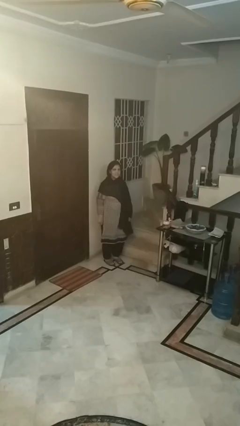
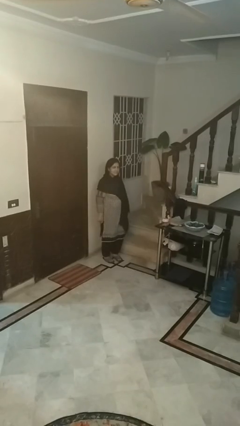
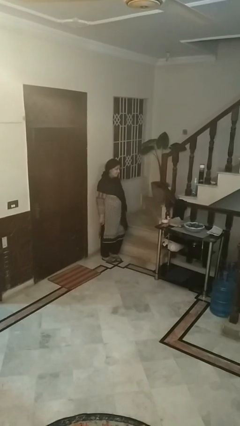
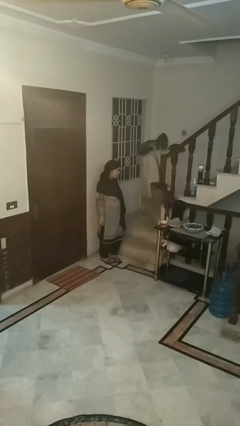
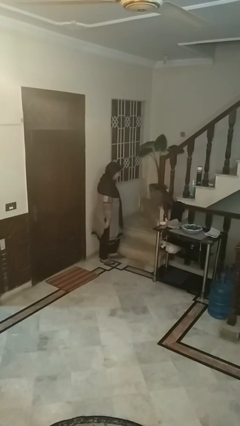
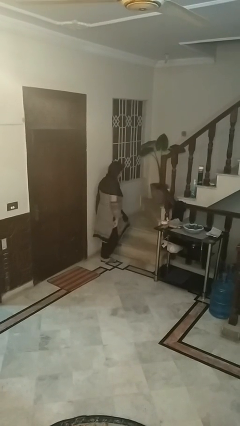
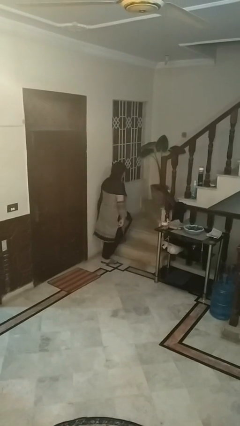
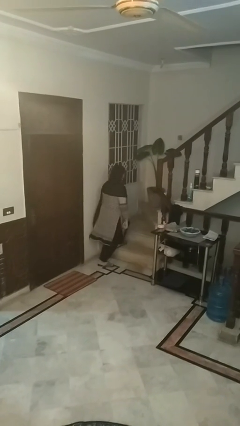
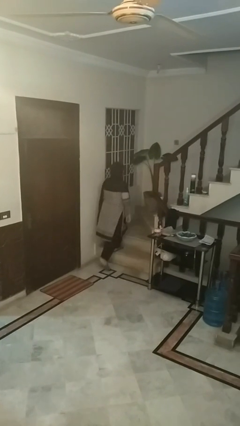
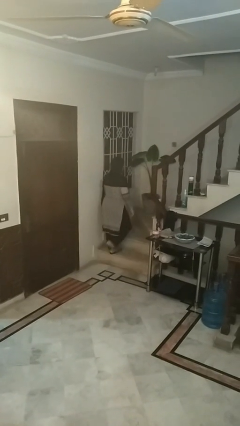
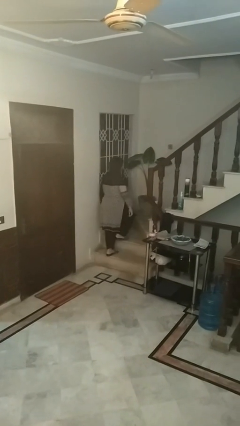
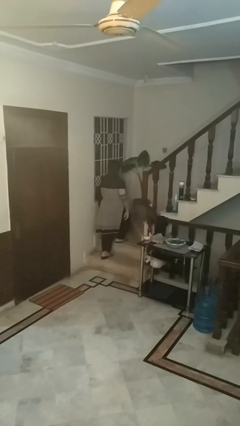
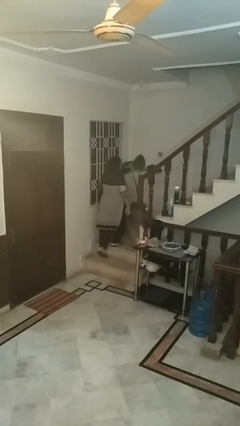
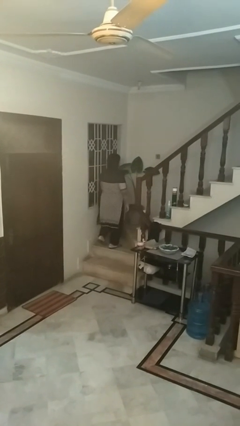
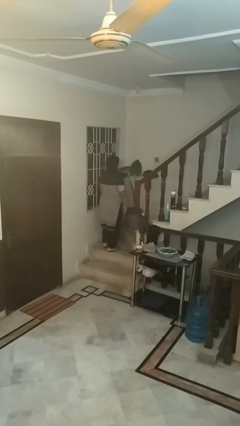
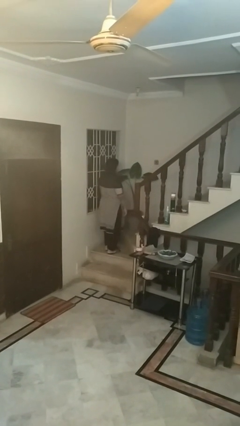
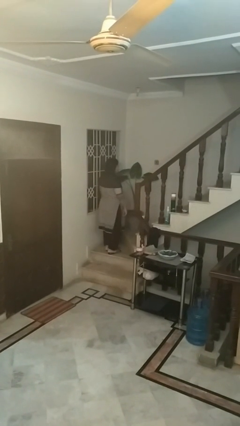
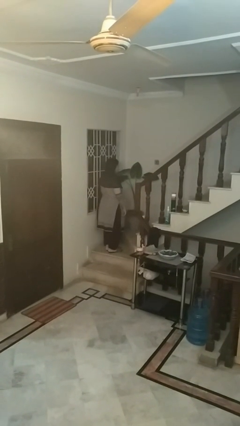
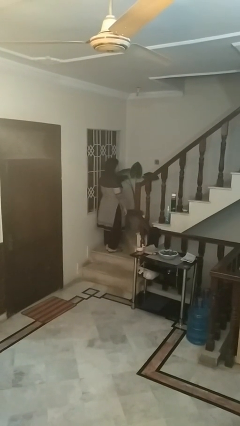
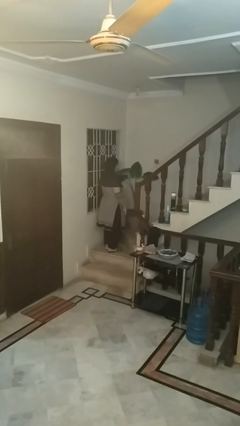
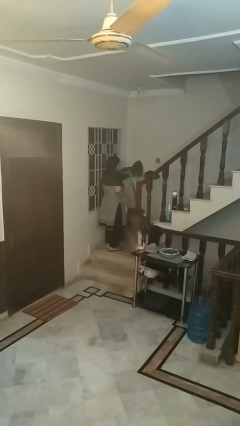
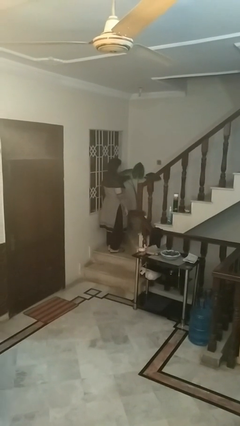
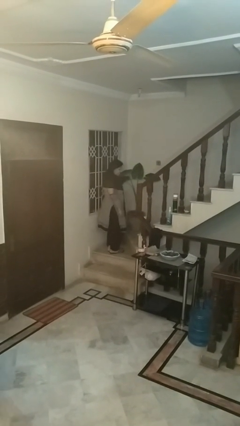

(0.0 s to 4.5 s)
person climbs up stairs

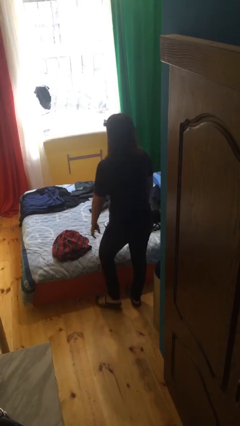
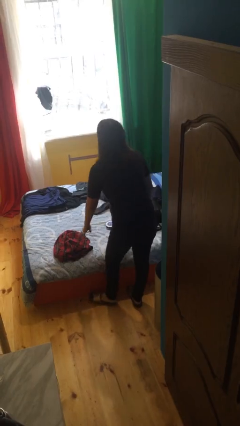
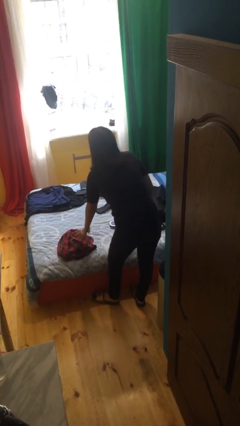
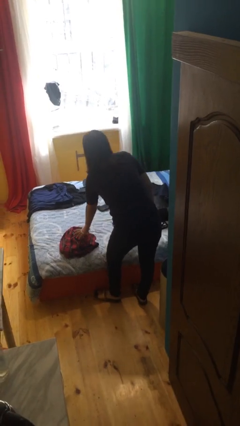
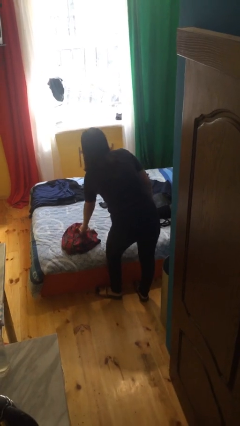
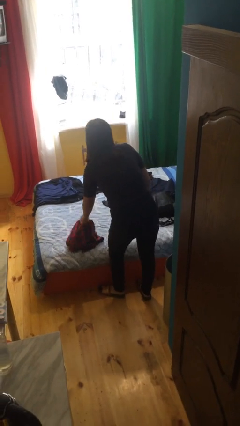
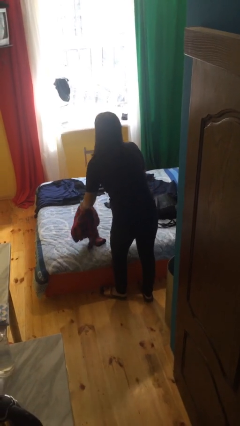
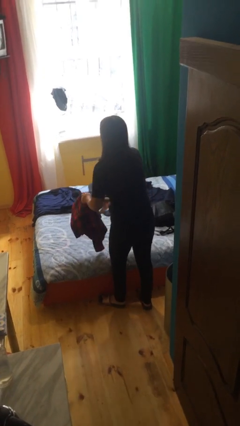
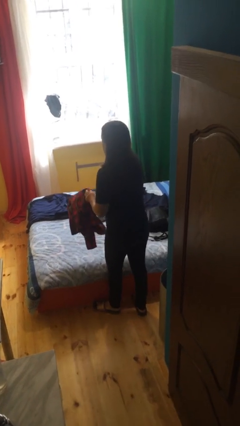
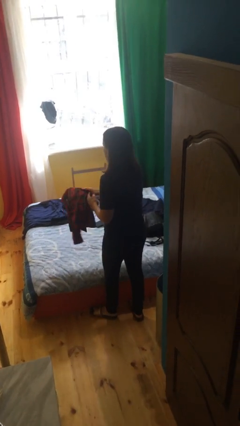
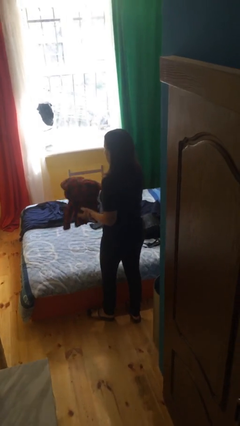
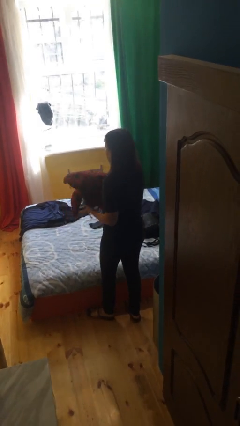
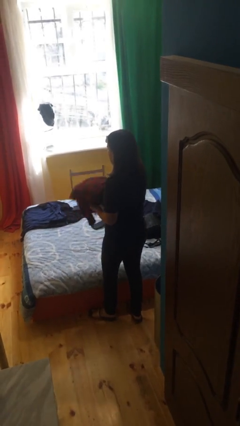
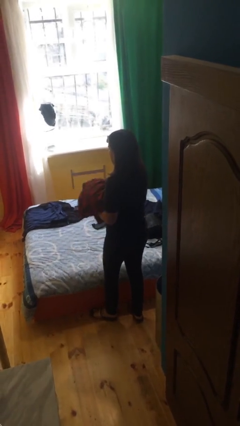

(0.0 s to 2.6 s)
person picks up object from bed

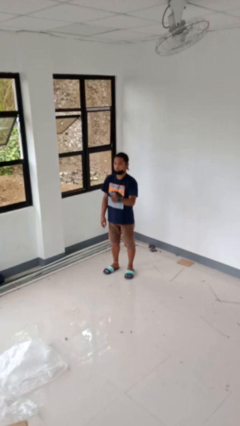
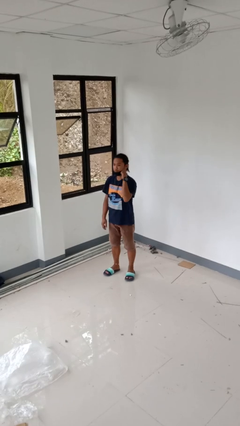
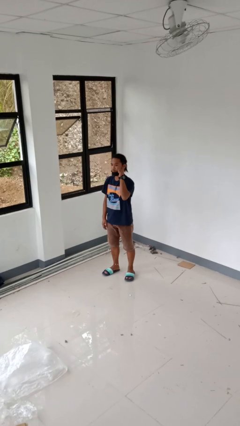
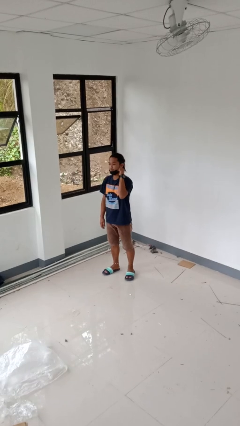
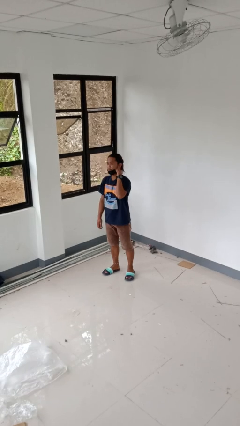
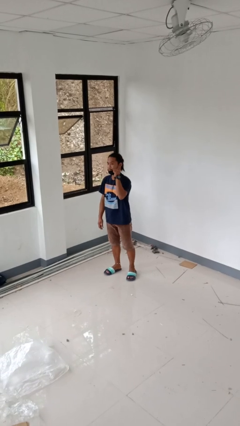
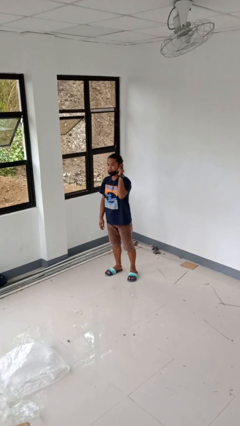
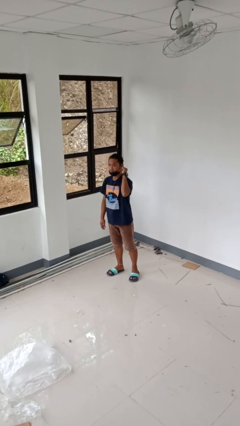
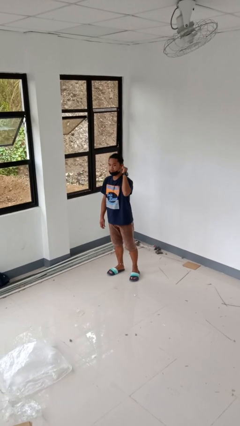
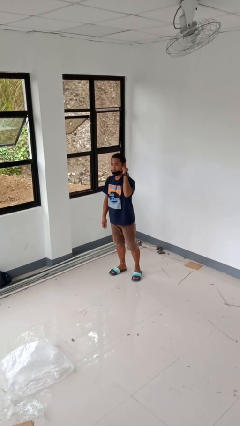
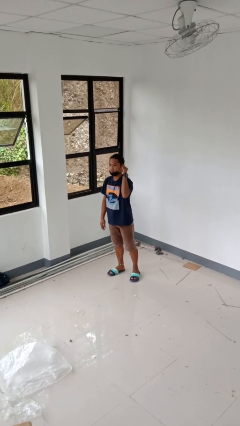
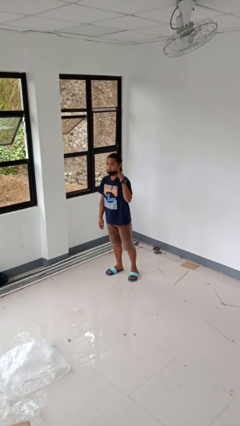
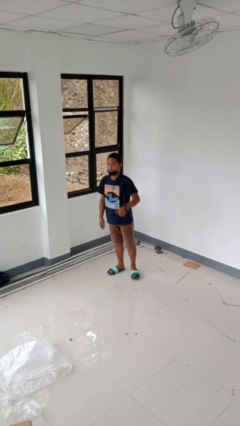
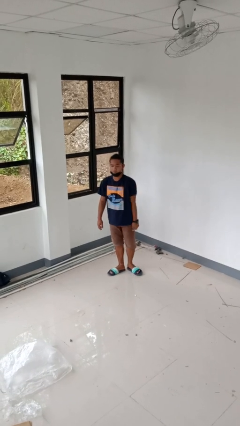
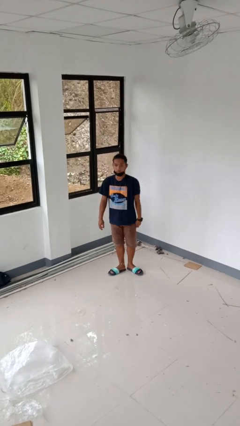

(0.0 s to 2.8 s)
person gestures behind me

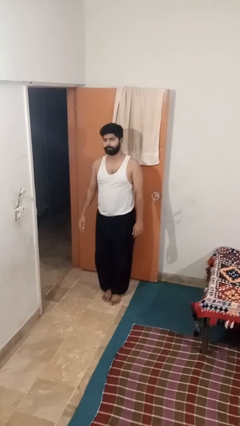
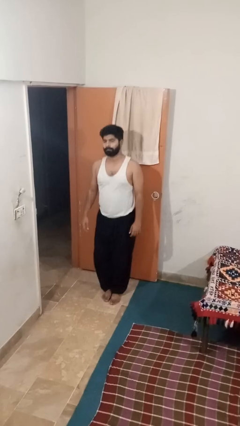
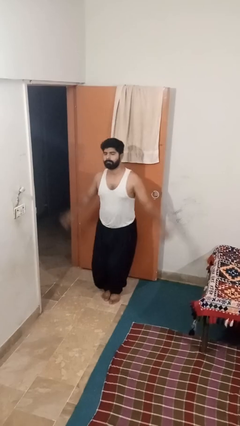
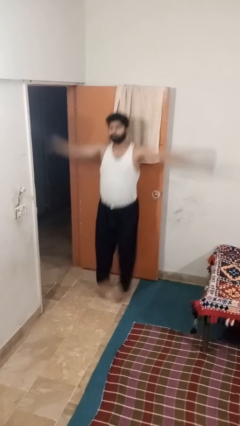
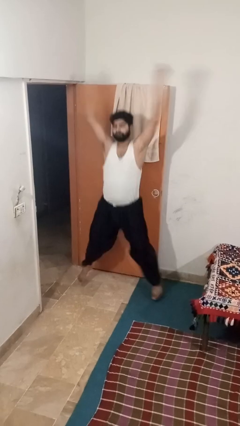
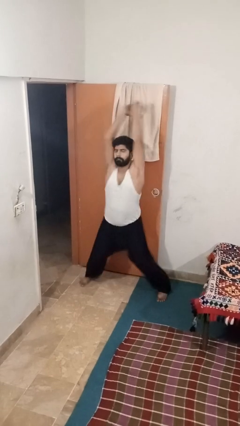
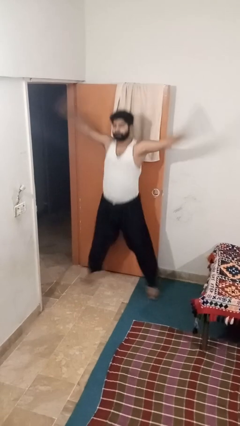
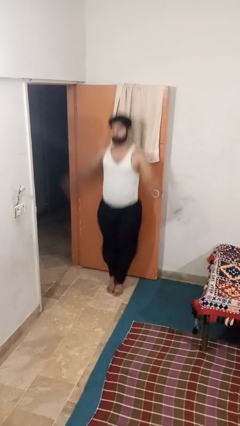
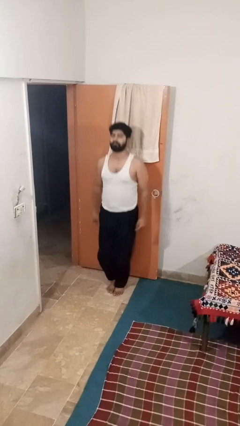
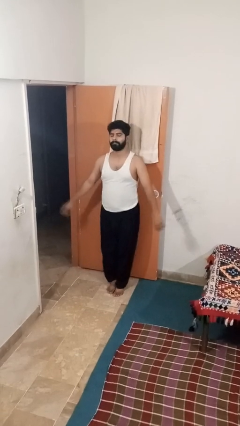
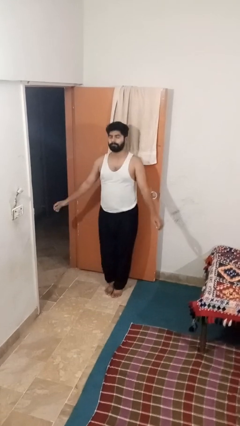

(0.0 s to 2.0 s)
person exercises with jumping jacks

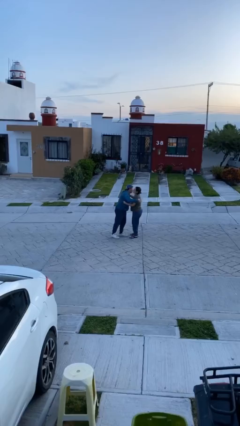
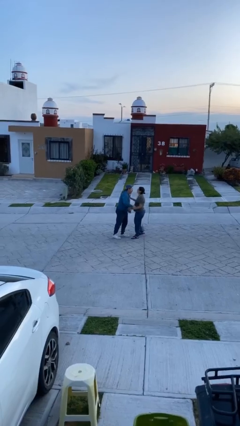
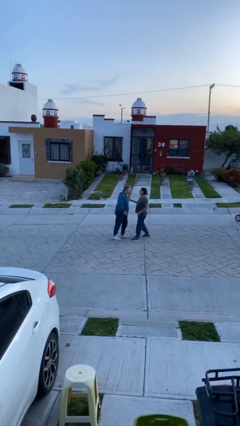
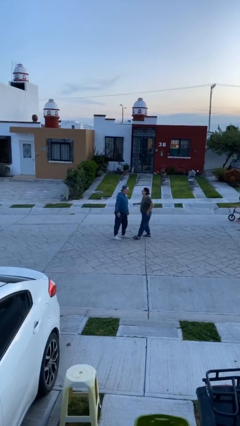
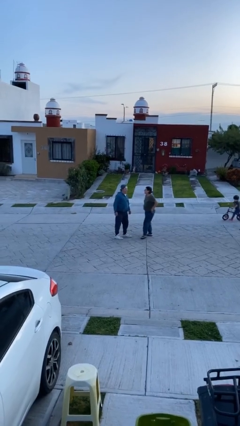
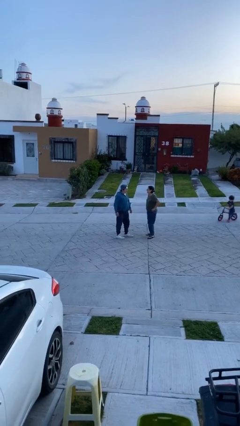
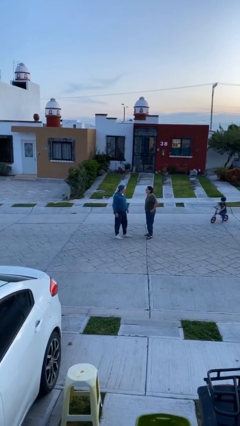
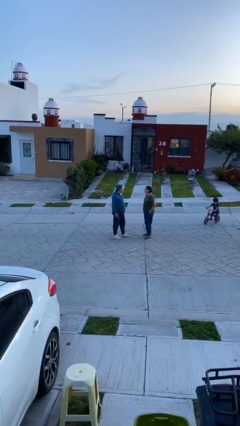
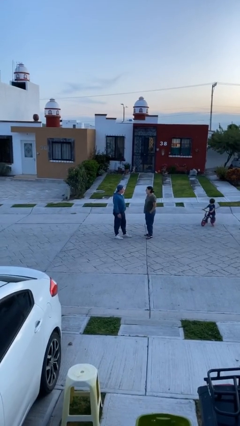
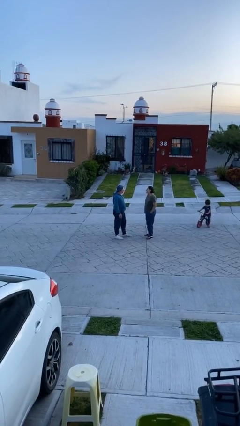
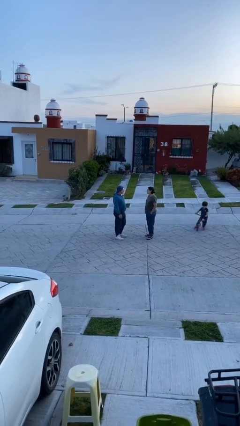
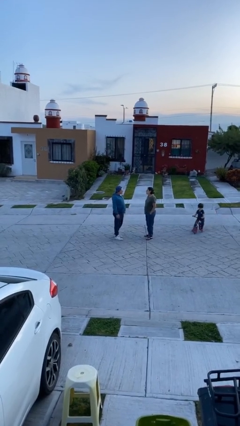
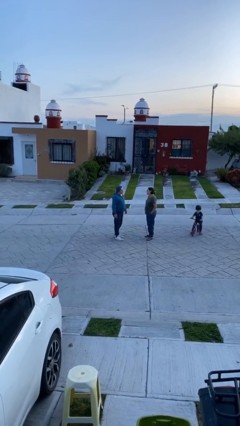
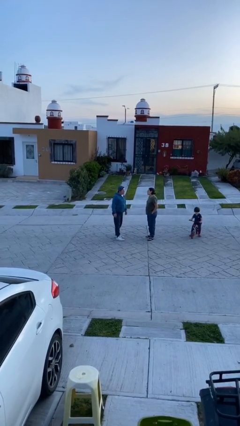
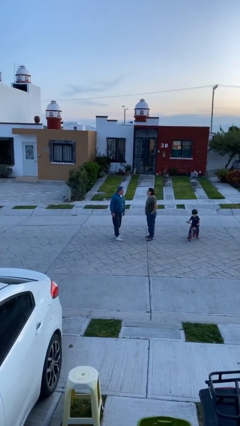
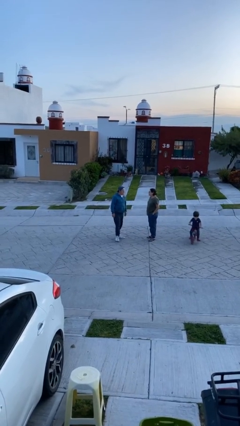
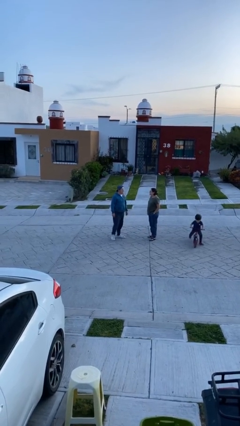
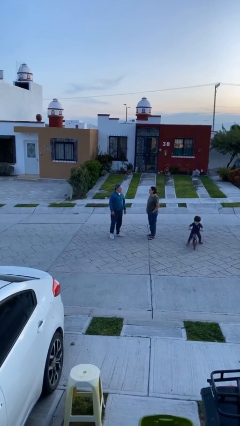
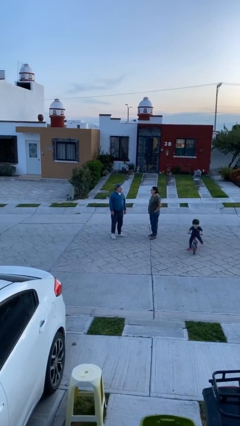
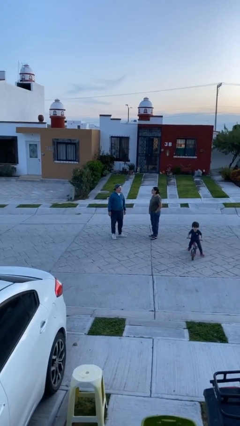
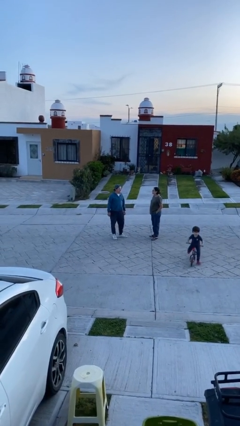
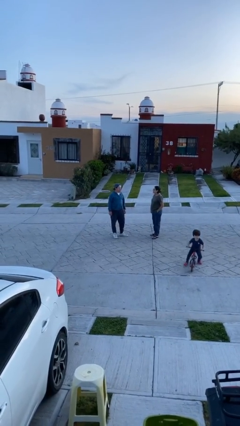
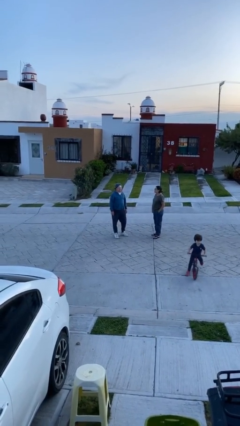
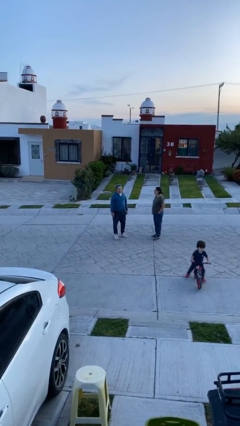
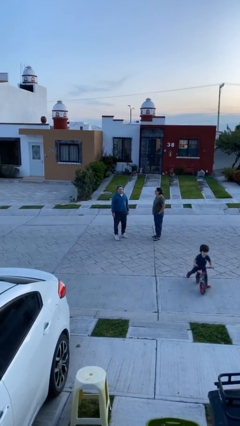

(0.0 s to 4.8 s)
person talks to person

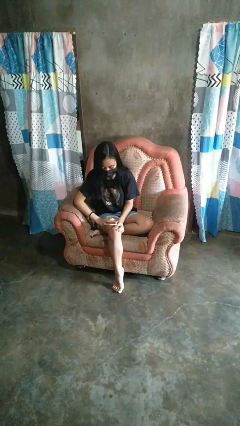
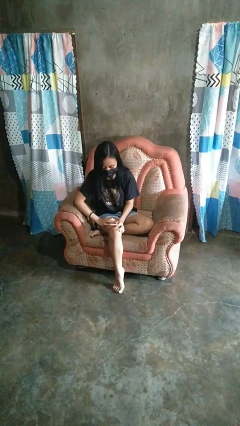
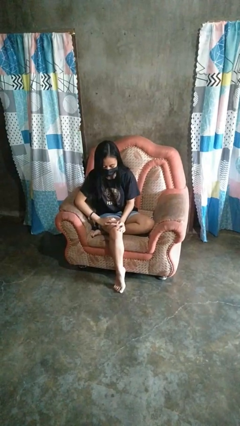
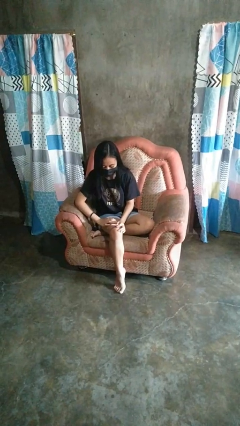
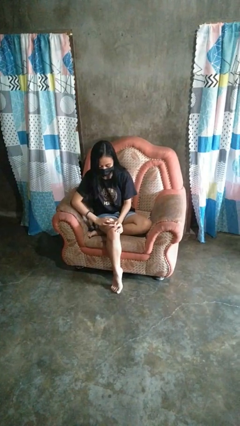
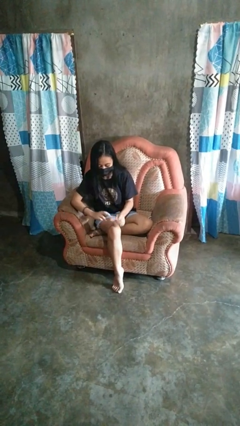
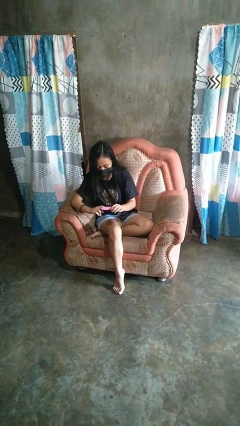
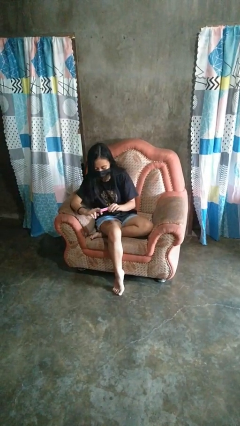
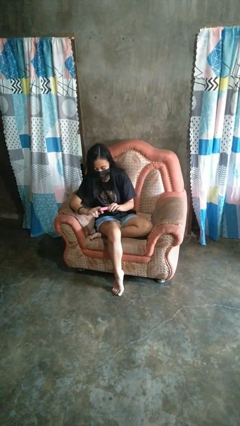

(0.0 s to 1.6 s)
person files fingernails
